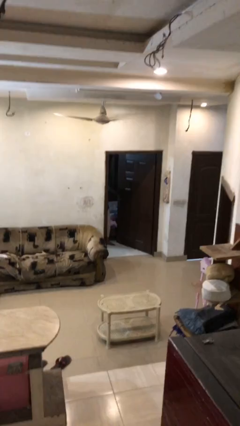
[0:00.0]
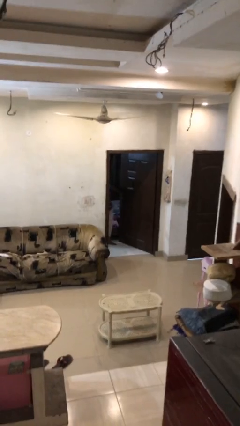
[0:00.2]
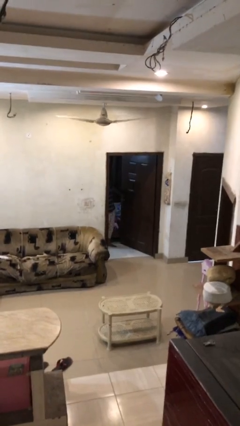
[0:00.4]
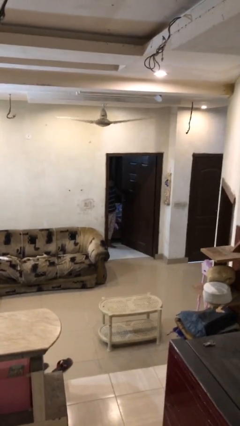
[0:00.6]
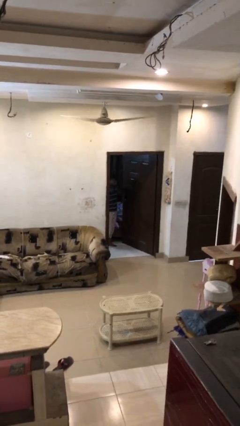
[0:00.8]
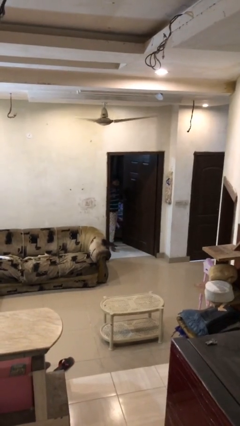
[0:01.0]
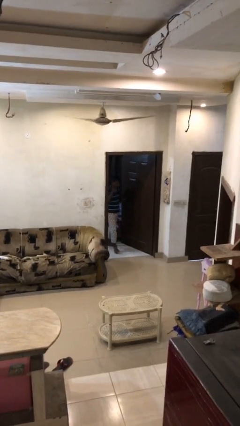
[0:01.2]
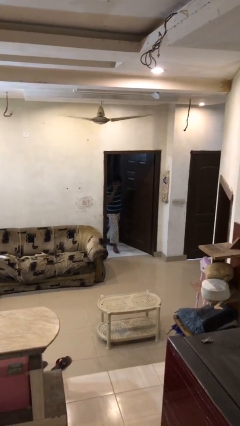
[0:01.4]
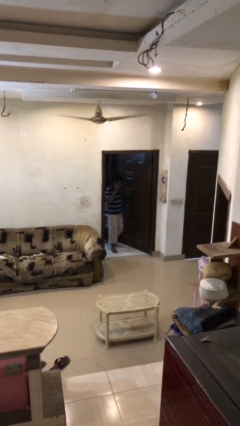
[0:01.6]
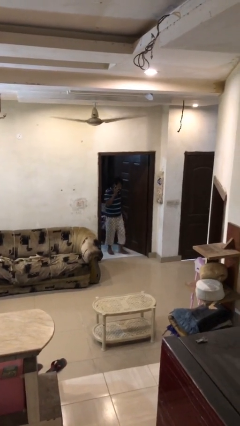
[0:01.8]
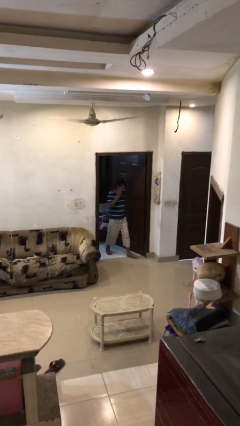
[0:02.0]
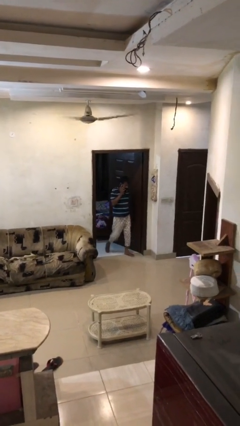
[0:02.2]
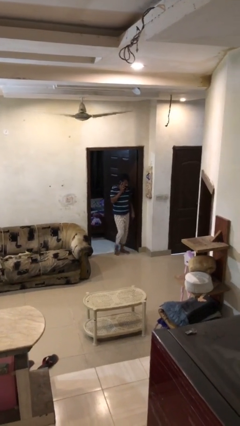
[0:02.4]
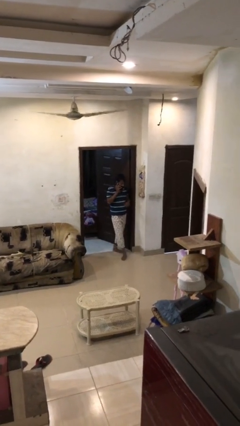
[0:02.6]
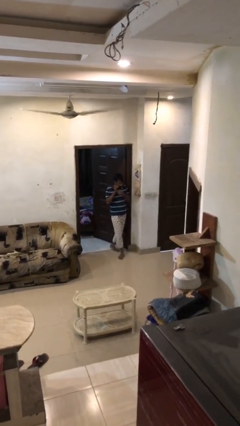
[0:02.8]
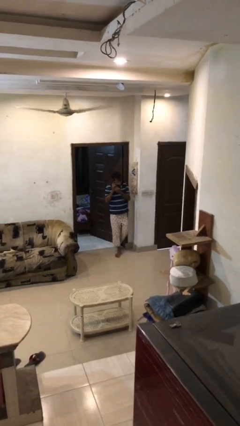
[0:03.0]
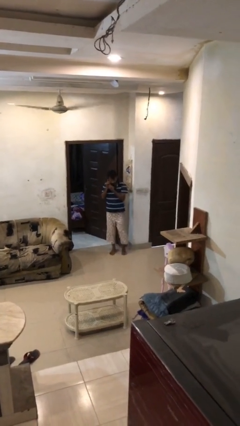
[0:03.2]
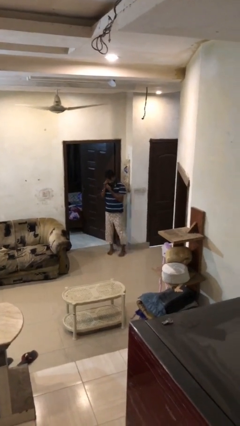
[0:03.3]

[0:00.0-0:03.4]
person enters scene through structure

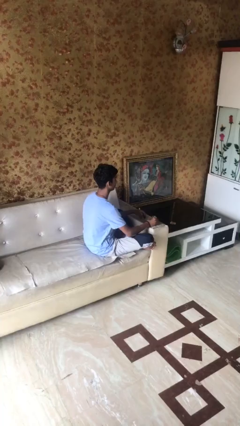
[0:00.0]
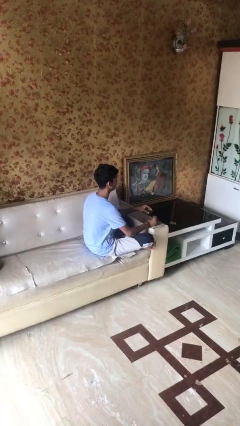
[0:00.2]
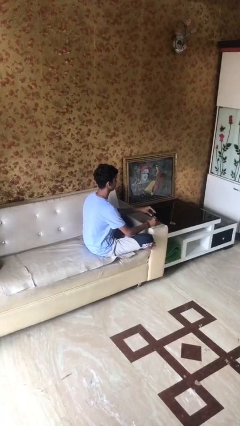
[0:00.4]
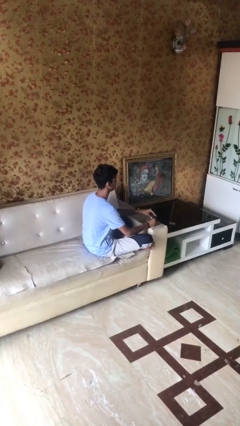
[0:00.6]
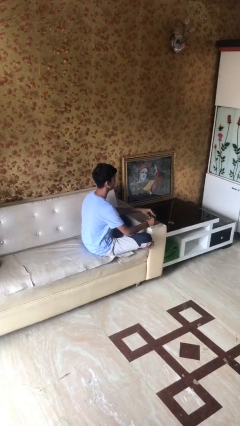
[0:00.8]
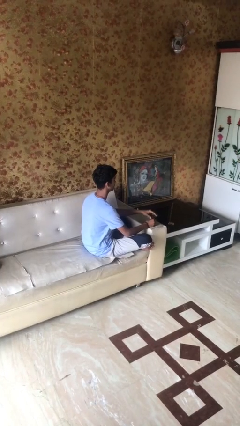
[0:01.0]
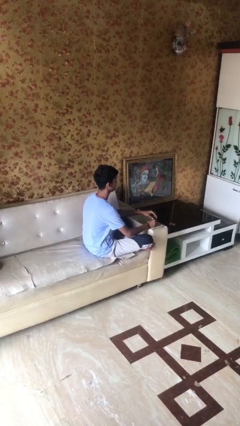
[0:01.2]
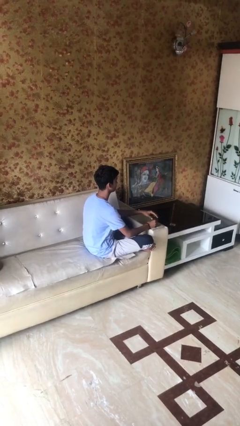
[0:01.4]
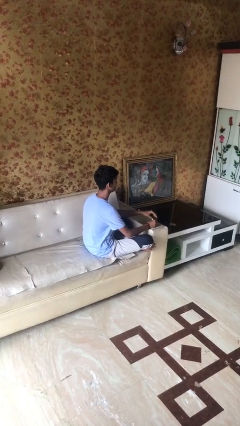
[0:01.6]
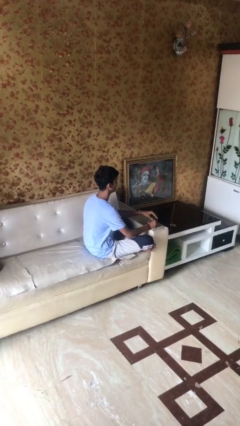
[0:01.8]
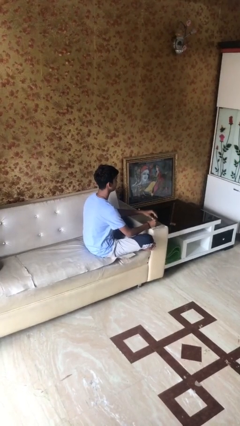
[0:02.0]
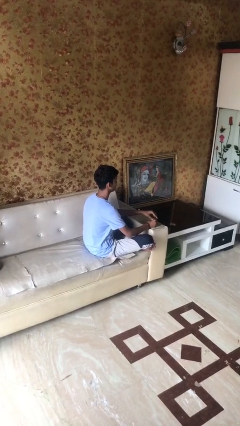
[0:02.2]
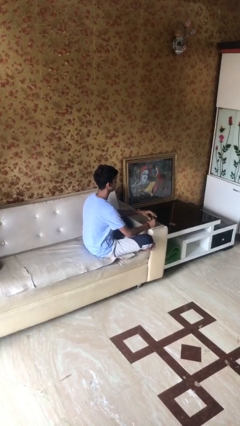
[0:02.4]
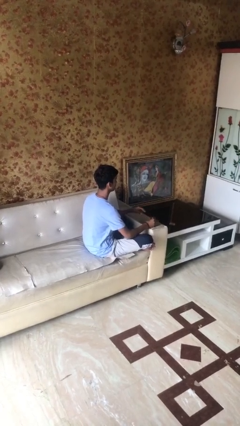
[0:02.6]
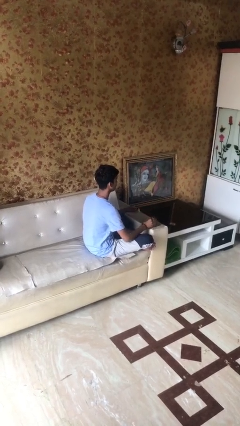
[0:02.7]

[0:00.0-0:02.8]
person closes jar

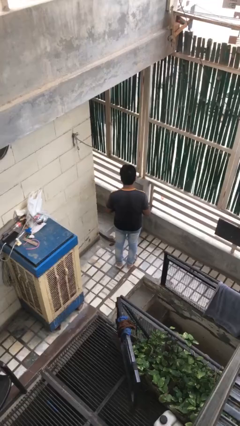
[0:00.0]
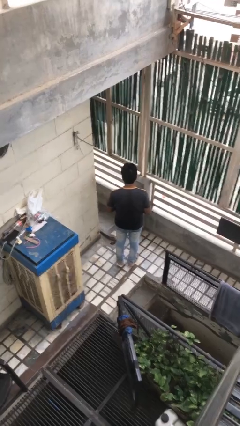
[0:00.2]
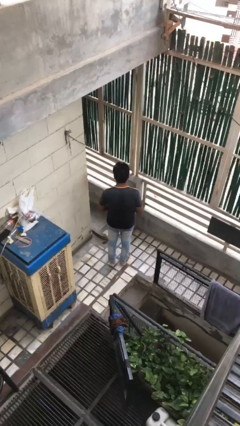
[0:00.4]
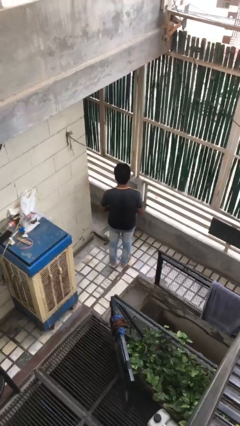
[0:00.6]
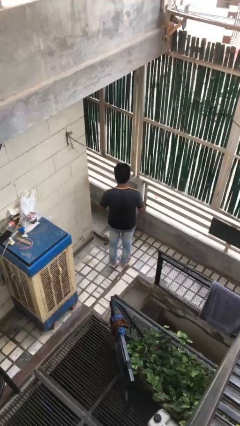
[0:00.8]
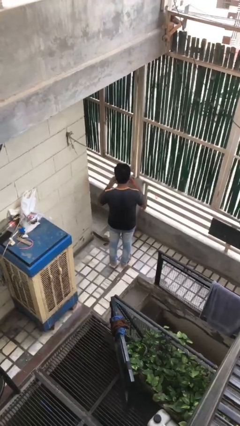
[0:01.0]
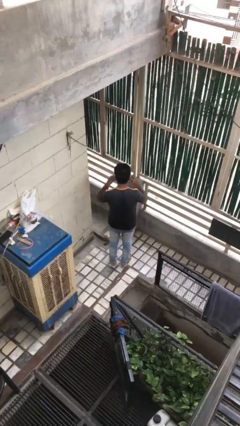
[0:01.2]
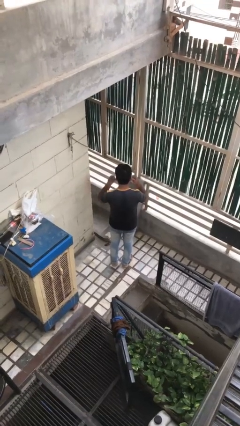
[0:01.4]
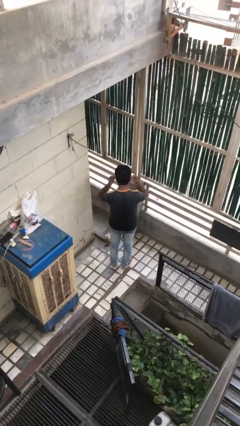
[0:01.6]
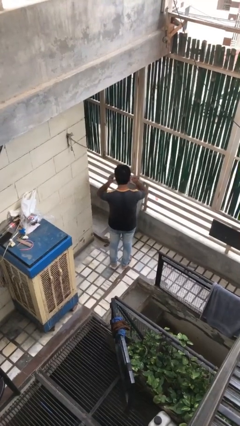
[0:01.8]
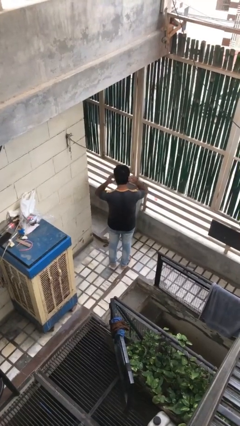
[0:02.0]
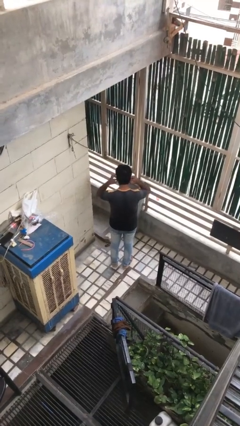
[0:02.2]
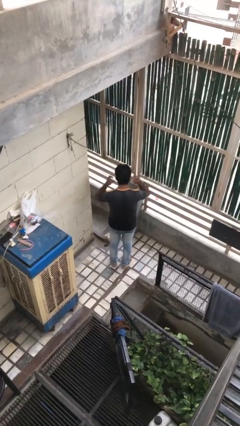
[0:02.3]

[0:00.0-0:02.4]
person puts on facemask

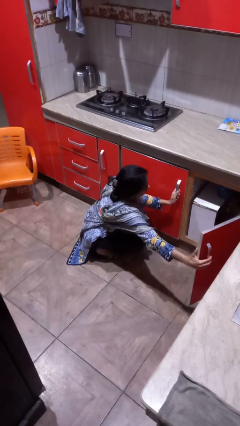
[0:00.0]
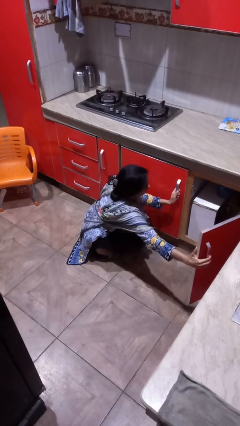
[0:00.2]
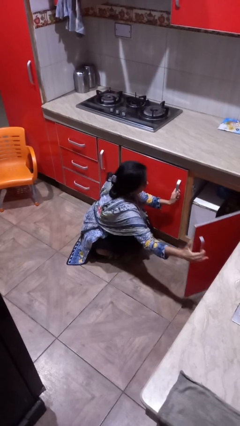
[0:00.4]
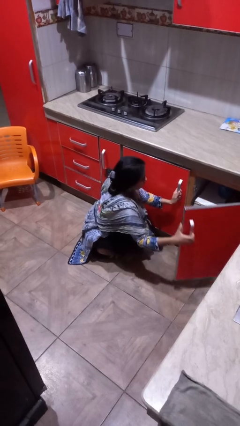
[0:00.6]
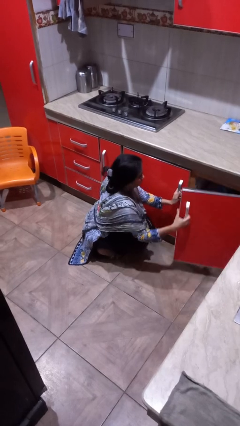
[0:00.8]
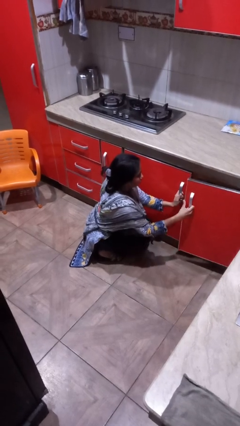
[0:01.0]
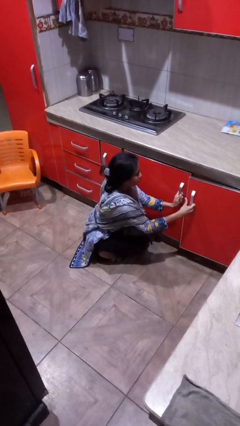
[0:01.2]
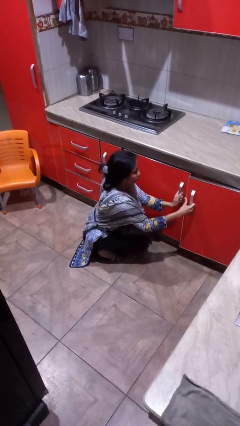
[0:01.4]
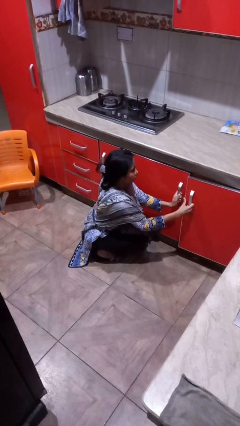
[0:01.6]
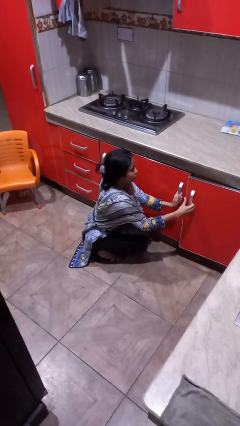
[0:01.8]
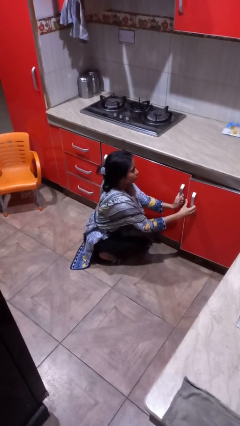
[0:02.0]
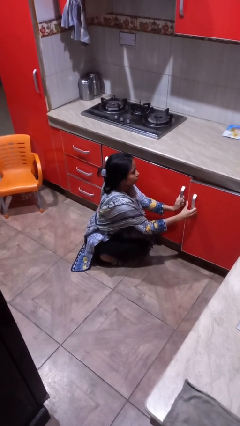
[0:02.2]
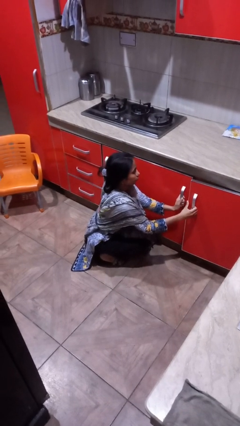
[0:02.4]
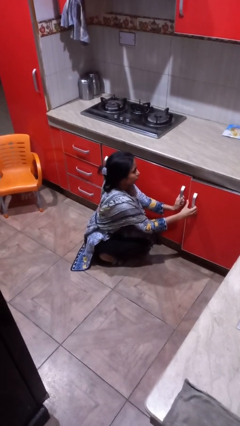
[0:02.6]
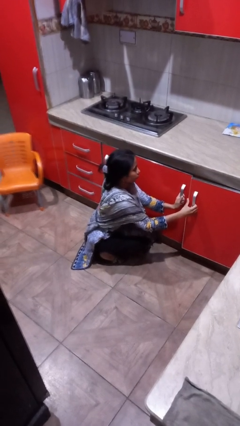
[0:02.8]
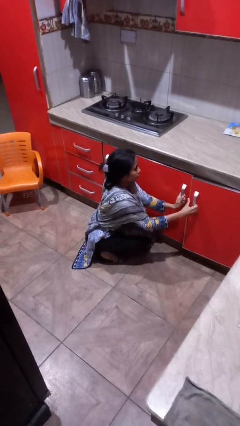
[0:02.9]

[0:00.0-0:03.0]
person closes cabinet

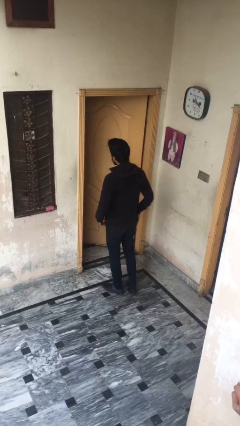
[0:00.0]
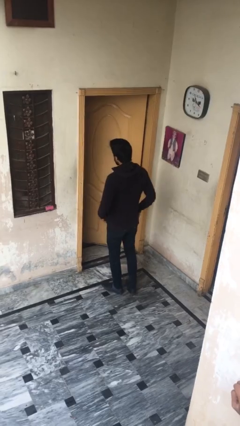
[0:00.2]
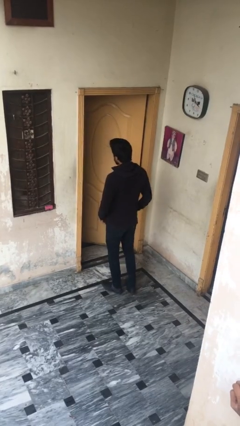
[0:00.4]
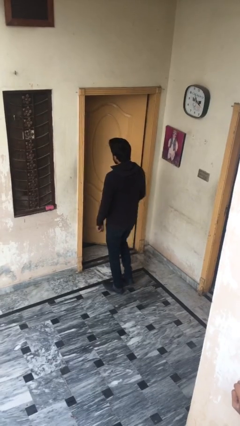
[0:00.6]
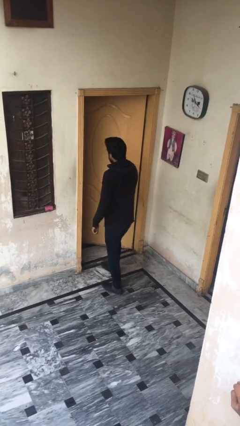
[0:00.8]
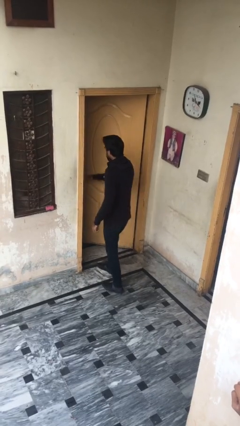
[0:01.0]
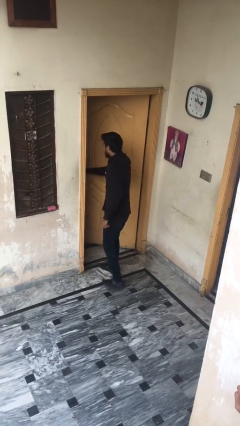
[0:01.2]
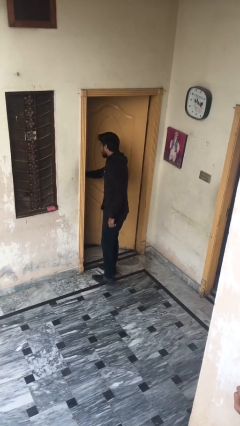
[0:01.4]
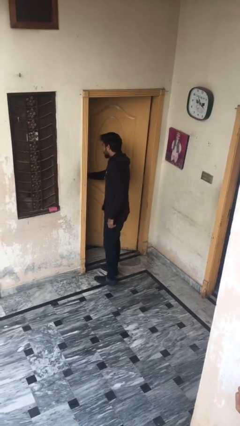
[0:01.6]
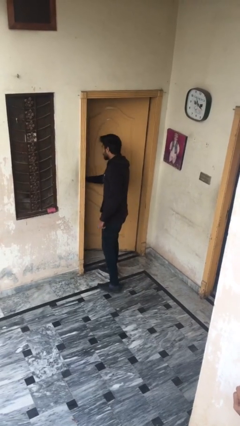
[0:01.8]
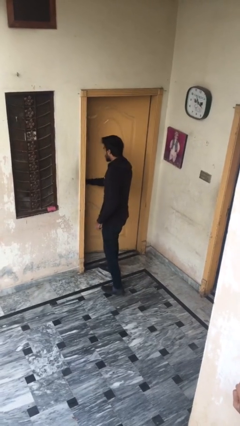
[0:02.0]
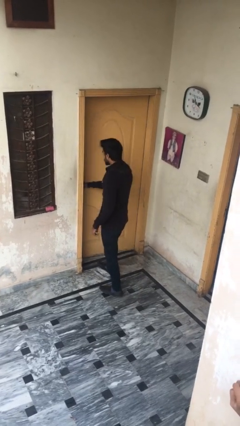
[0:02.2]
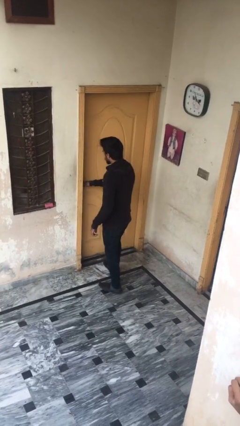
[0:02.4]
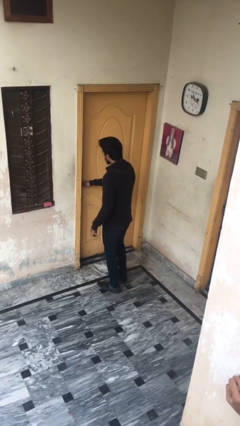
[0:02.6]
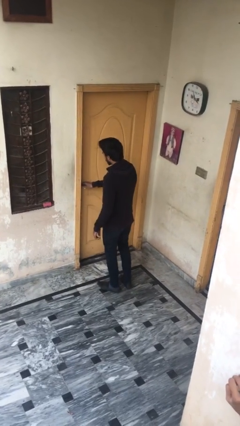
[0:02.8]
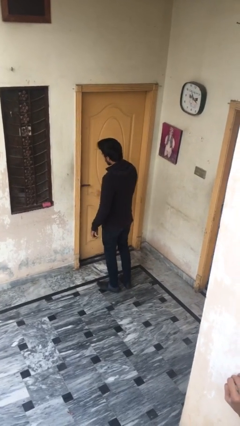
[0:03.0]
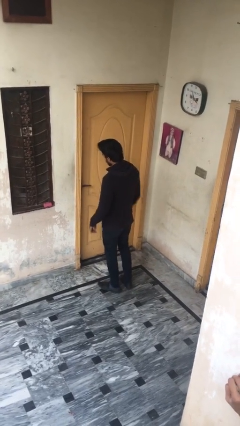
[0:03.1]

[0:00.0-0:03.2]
person closes facility door

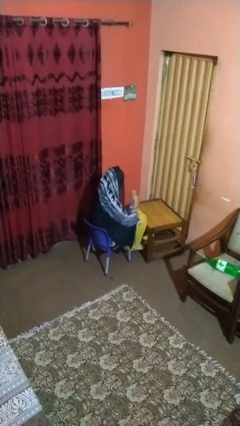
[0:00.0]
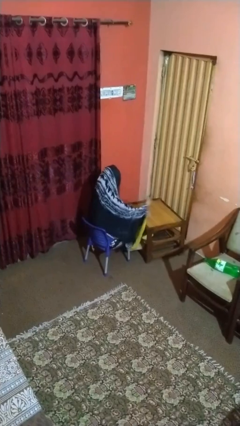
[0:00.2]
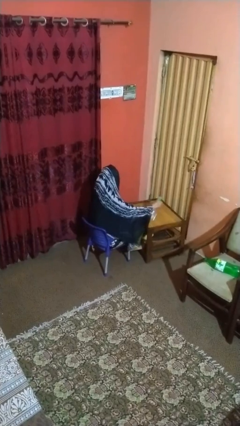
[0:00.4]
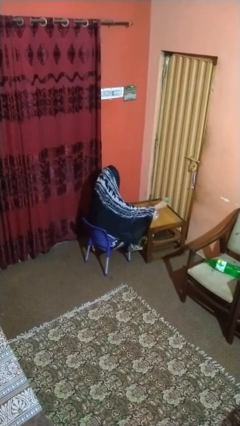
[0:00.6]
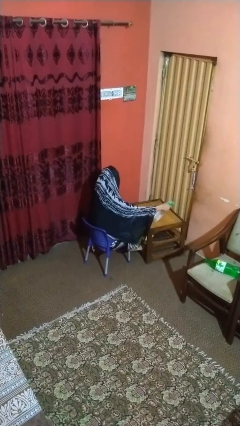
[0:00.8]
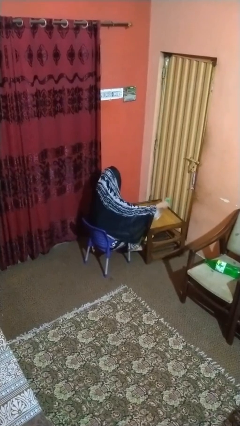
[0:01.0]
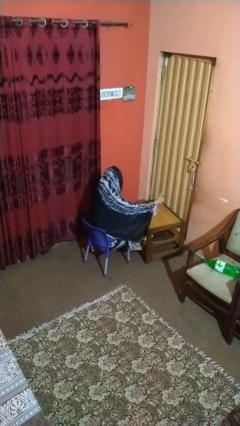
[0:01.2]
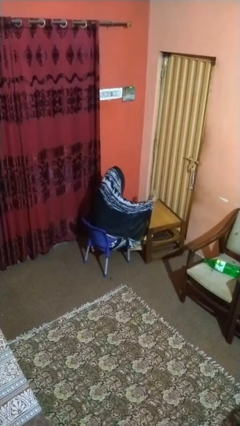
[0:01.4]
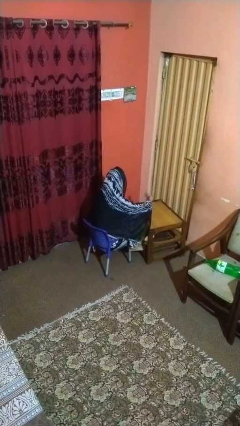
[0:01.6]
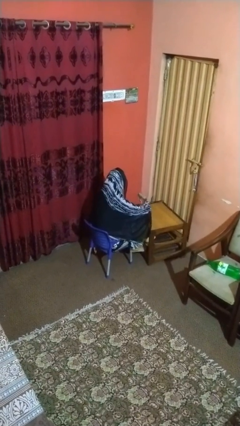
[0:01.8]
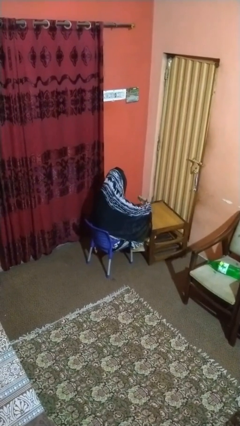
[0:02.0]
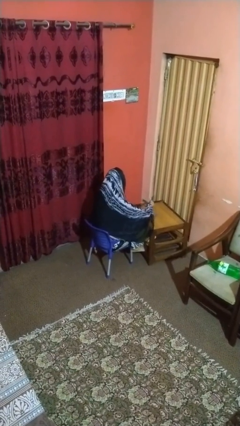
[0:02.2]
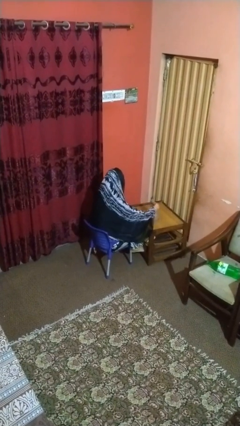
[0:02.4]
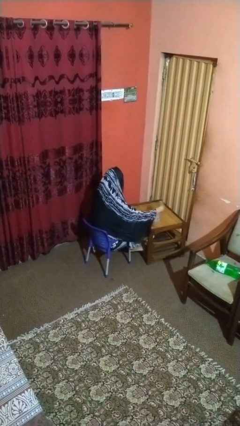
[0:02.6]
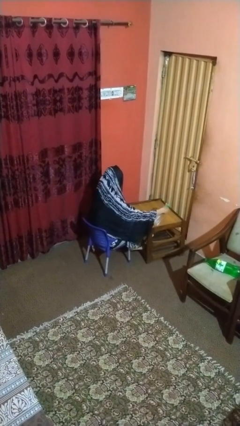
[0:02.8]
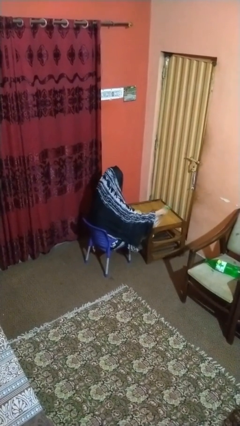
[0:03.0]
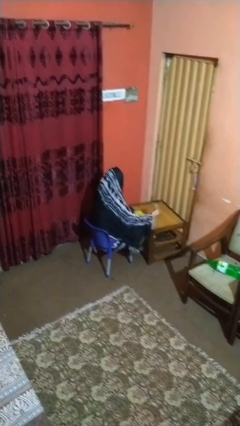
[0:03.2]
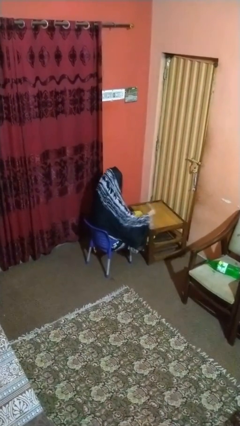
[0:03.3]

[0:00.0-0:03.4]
person sprays from bottle
